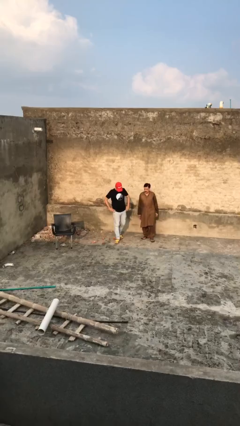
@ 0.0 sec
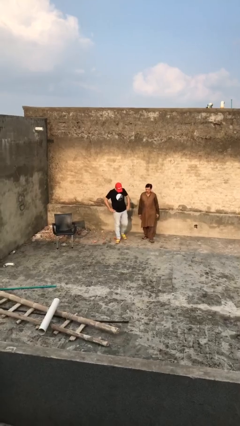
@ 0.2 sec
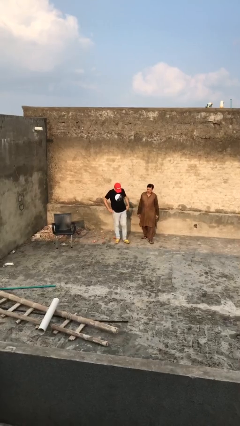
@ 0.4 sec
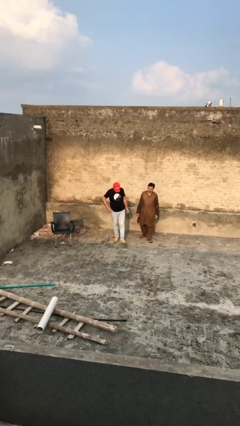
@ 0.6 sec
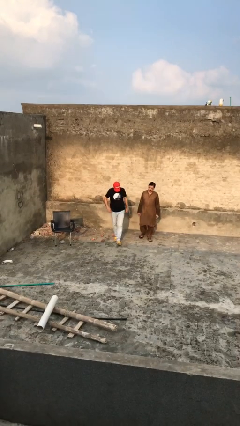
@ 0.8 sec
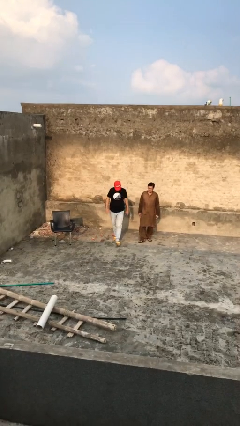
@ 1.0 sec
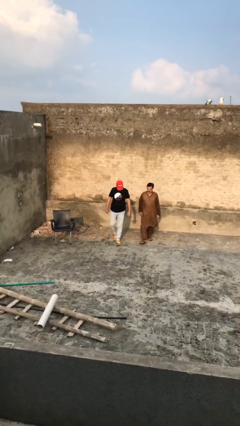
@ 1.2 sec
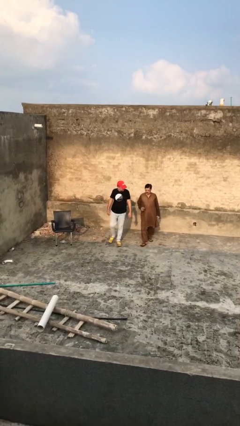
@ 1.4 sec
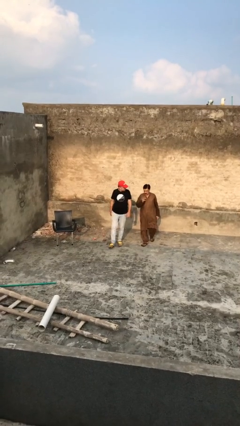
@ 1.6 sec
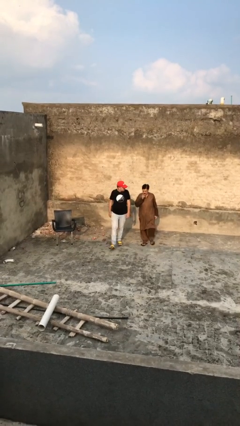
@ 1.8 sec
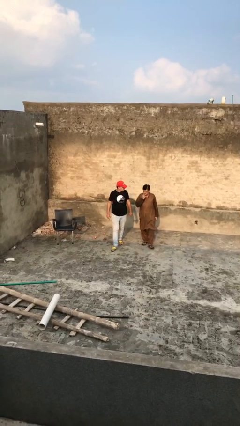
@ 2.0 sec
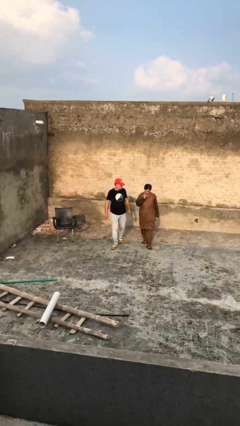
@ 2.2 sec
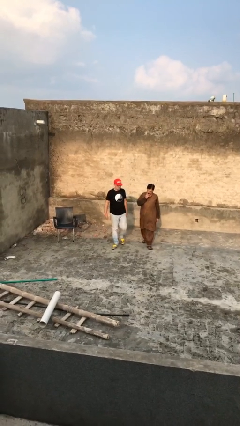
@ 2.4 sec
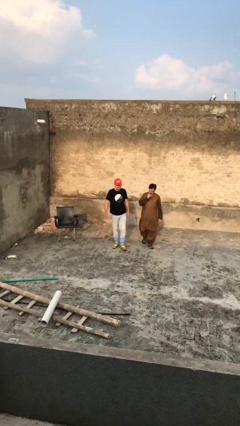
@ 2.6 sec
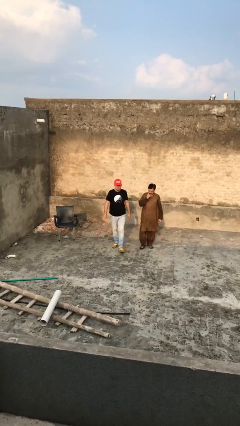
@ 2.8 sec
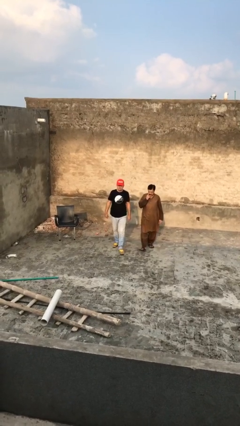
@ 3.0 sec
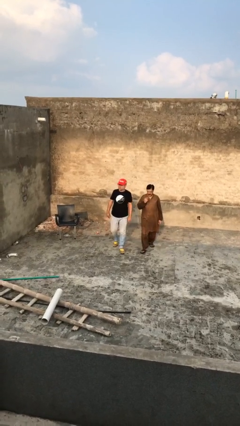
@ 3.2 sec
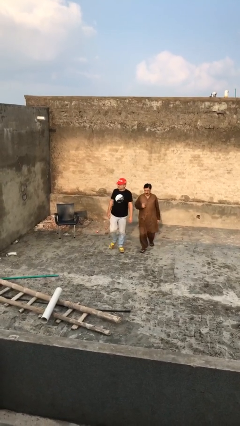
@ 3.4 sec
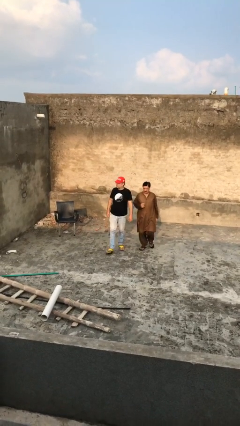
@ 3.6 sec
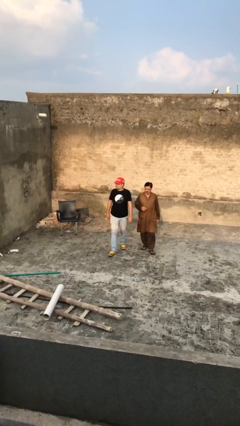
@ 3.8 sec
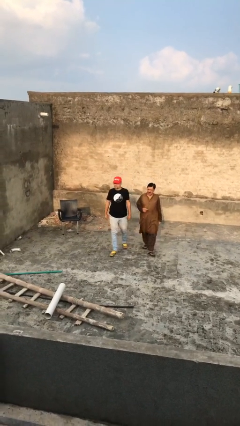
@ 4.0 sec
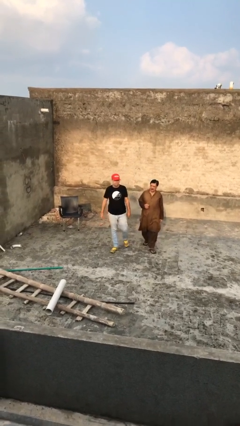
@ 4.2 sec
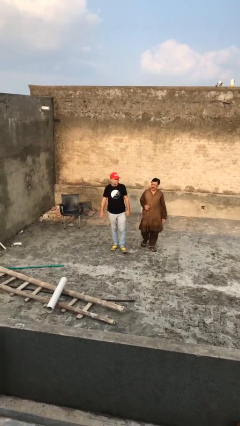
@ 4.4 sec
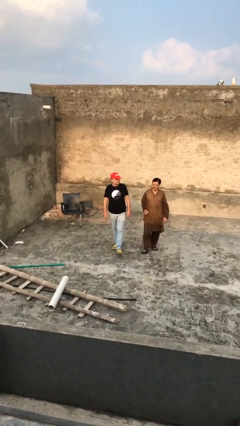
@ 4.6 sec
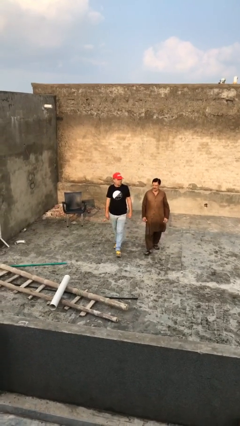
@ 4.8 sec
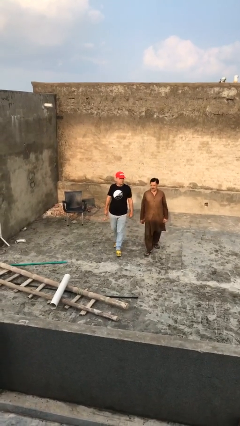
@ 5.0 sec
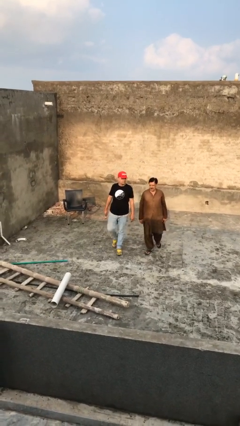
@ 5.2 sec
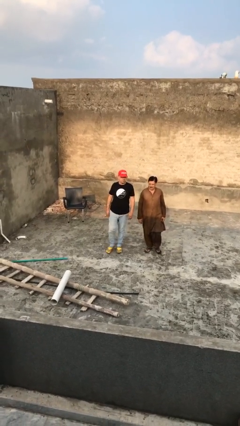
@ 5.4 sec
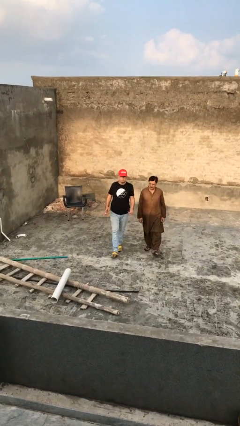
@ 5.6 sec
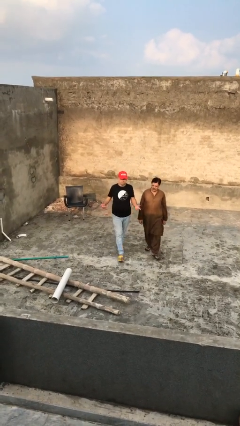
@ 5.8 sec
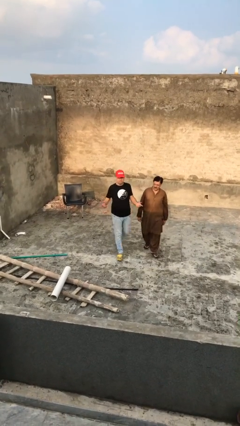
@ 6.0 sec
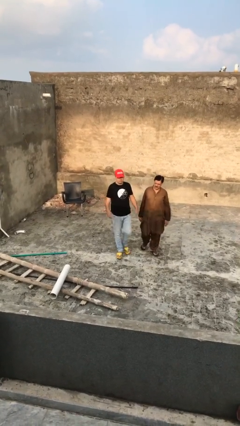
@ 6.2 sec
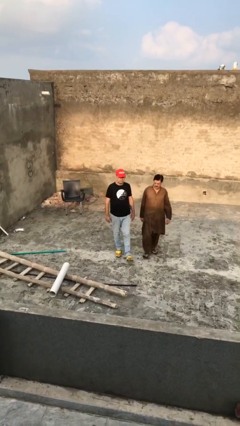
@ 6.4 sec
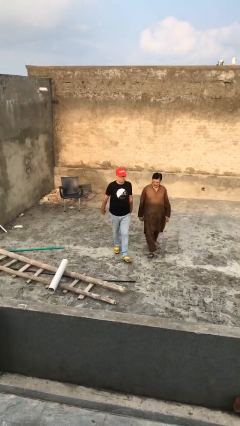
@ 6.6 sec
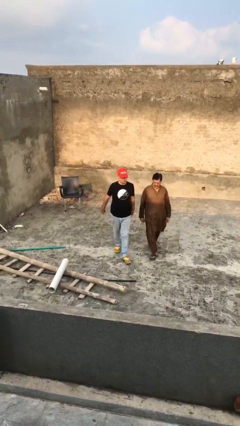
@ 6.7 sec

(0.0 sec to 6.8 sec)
person talks to person

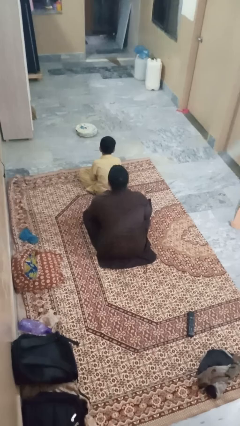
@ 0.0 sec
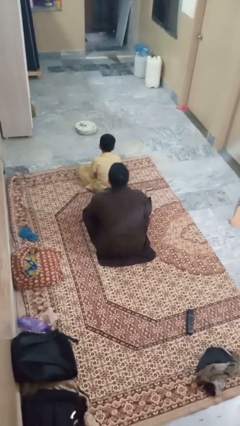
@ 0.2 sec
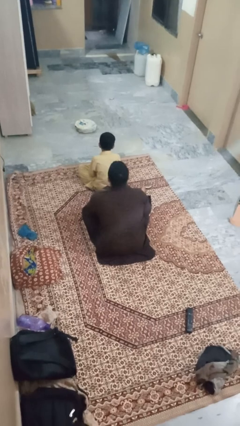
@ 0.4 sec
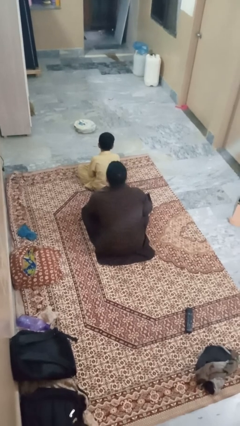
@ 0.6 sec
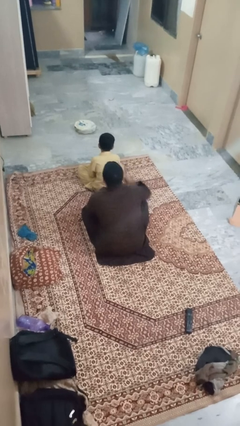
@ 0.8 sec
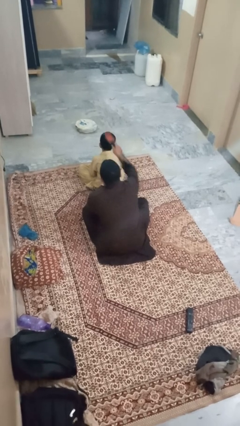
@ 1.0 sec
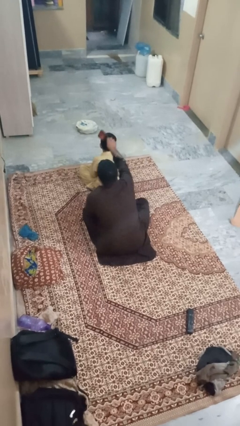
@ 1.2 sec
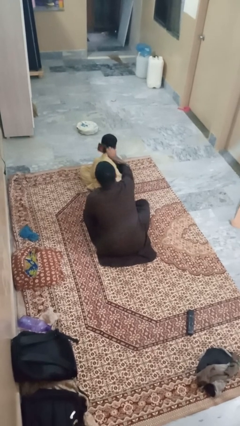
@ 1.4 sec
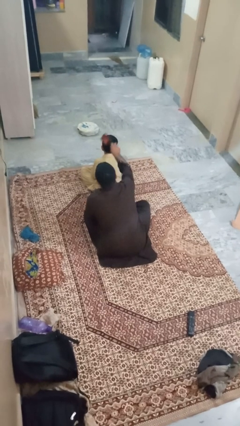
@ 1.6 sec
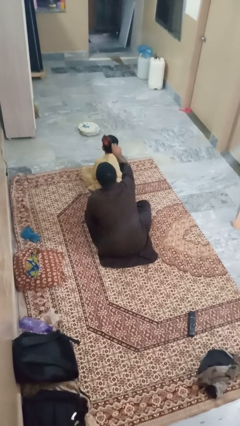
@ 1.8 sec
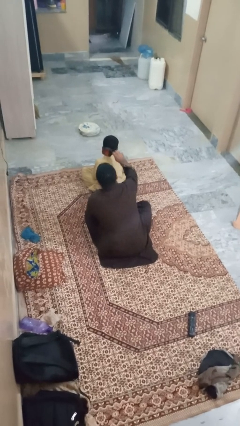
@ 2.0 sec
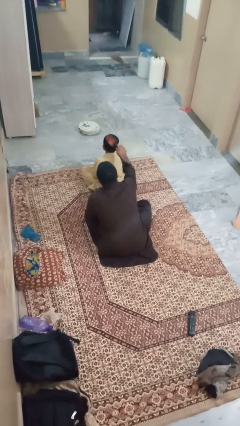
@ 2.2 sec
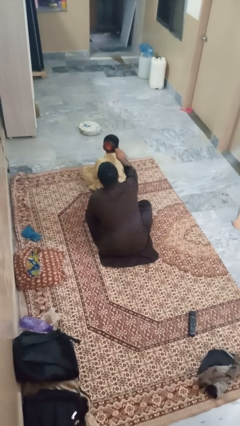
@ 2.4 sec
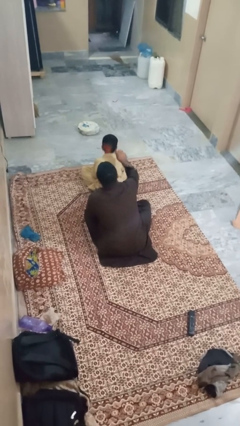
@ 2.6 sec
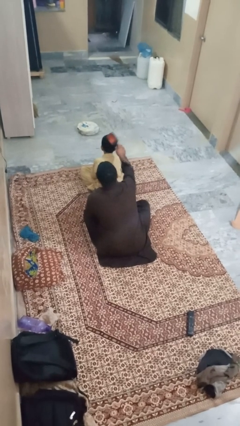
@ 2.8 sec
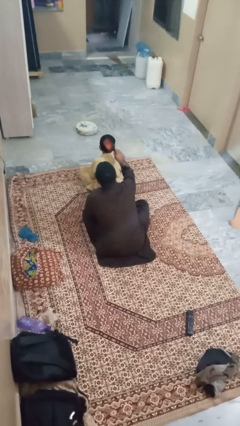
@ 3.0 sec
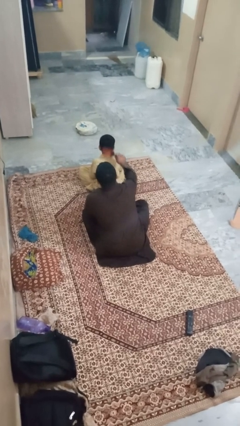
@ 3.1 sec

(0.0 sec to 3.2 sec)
person brushes hair of person

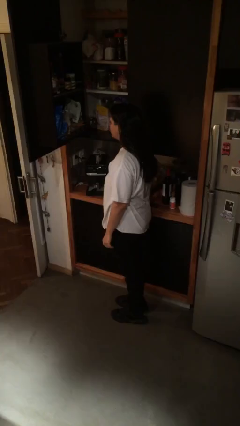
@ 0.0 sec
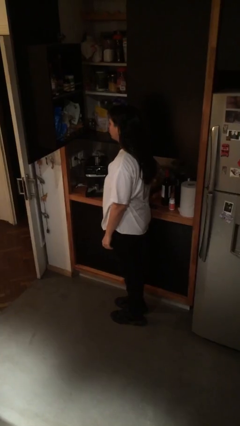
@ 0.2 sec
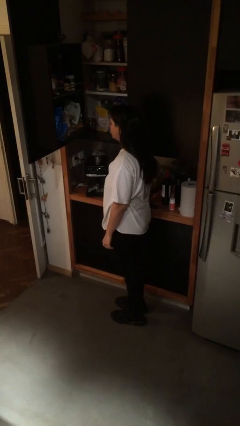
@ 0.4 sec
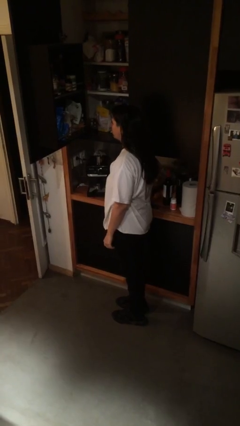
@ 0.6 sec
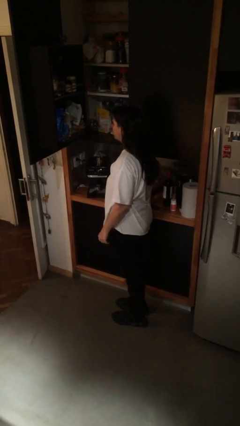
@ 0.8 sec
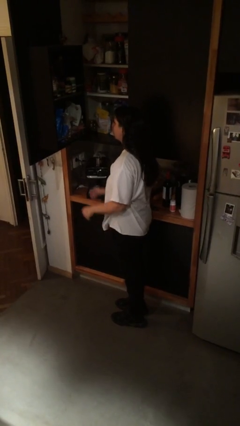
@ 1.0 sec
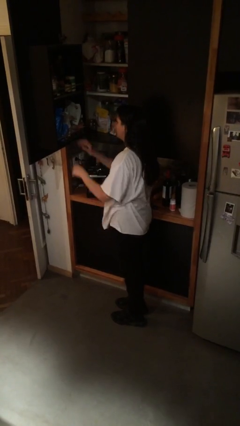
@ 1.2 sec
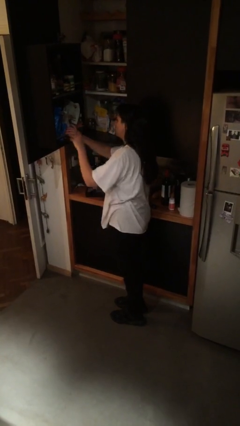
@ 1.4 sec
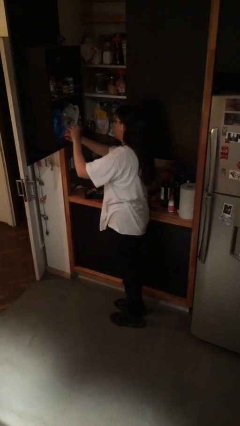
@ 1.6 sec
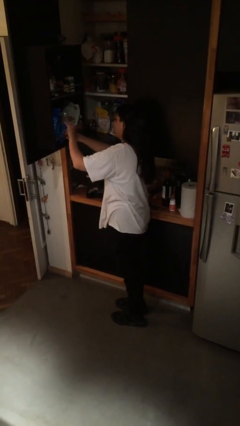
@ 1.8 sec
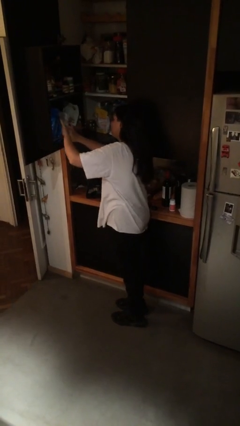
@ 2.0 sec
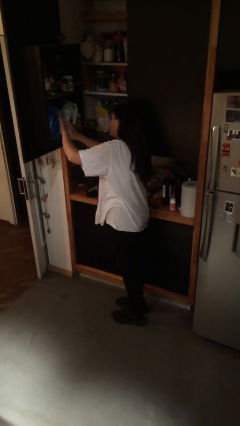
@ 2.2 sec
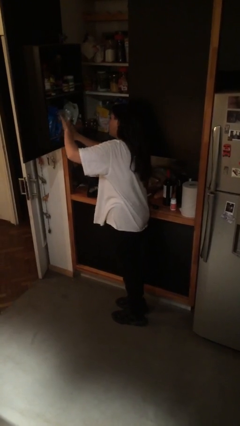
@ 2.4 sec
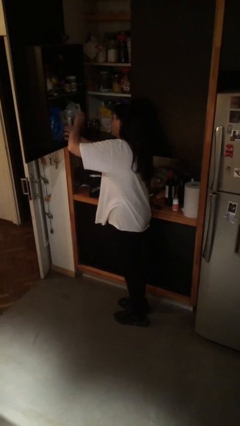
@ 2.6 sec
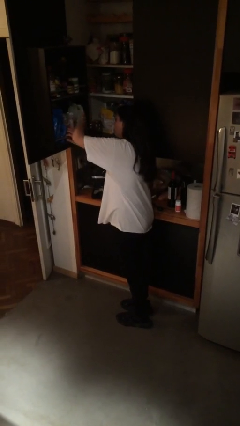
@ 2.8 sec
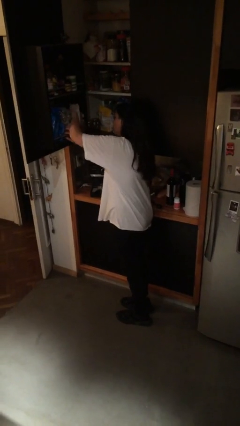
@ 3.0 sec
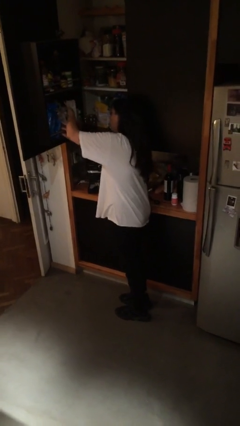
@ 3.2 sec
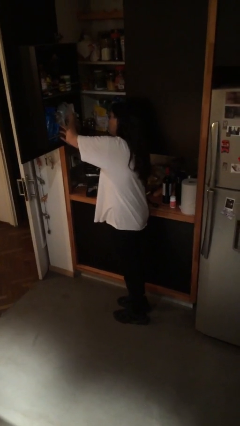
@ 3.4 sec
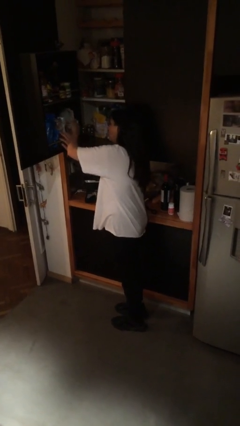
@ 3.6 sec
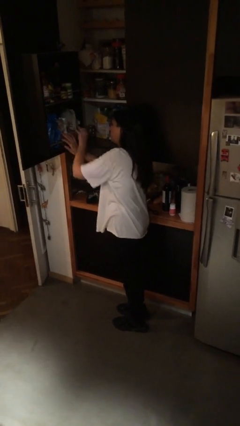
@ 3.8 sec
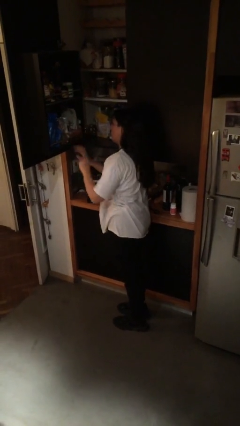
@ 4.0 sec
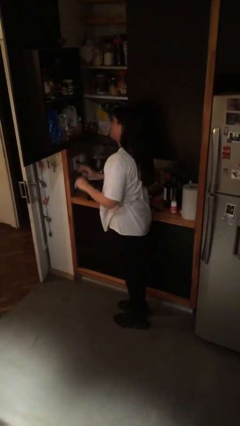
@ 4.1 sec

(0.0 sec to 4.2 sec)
person searches in cabinet

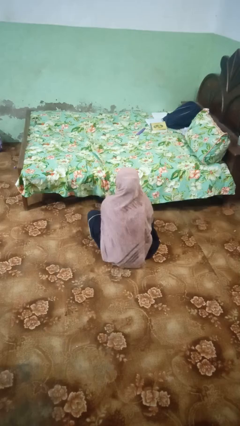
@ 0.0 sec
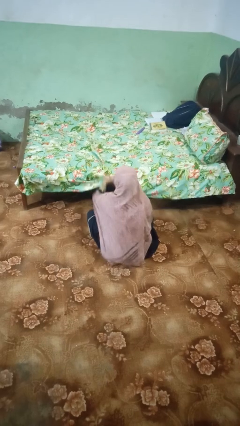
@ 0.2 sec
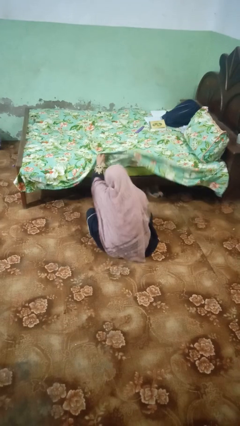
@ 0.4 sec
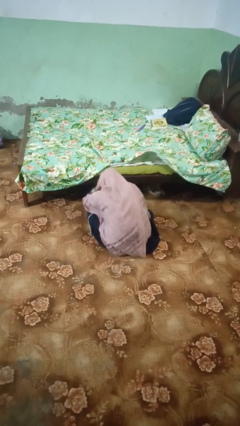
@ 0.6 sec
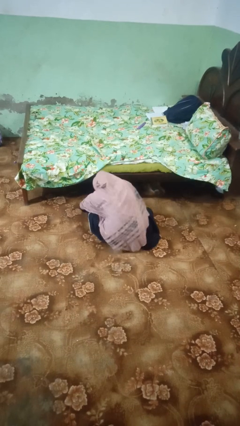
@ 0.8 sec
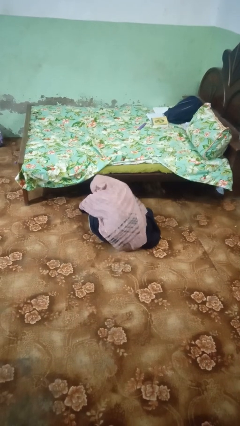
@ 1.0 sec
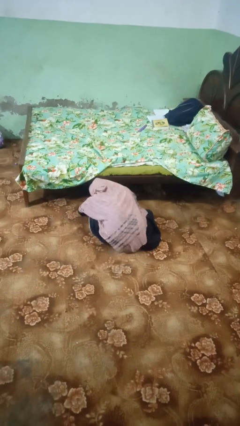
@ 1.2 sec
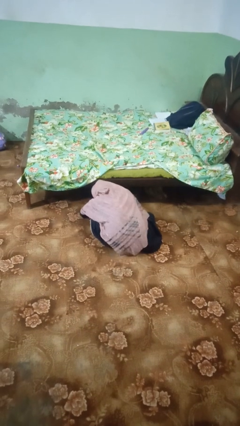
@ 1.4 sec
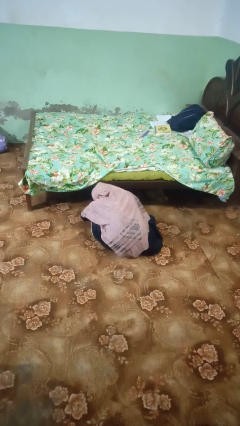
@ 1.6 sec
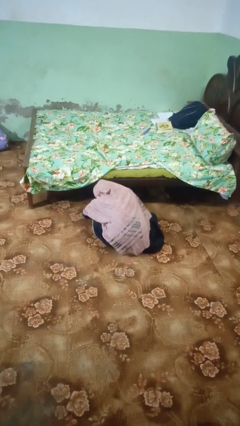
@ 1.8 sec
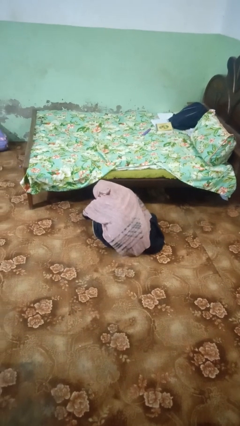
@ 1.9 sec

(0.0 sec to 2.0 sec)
person searches under bed

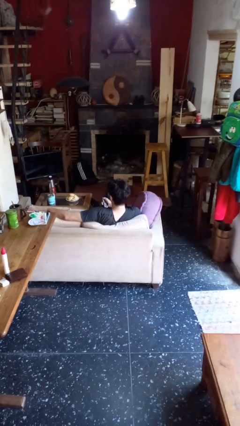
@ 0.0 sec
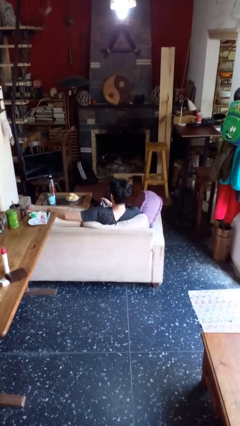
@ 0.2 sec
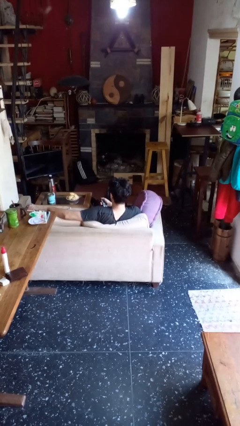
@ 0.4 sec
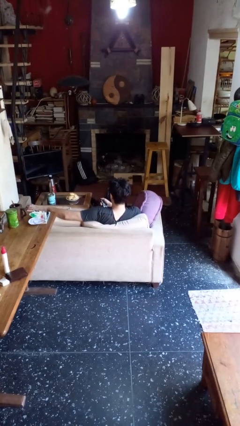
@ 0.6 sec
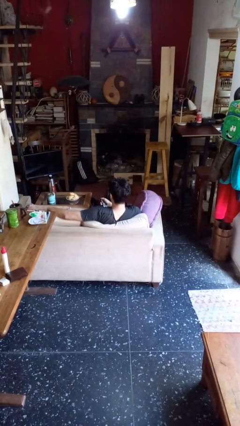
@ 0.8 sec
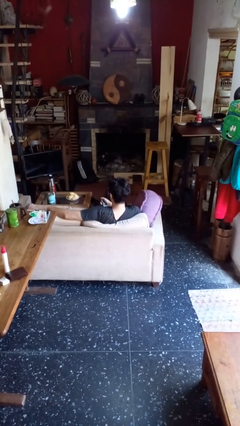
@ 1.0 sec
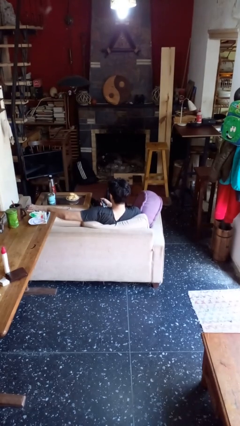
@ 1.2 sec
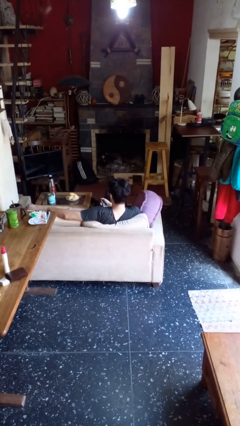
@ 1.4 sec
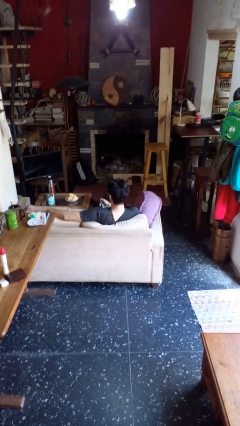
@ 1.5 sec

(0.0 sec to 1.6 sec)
person uses television remote
